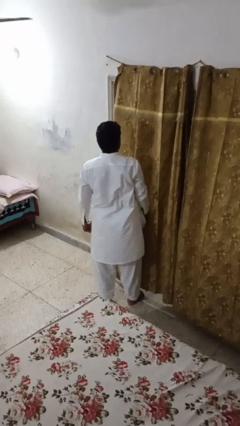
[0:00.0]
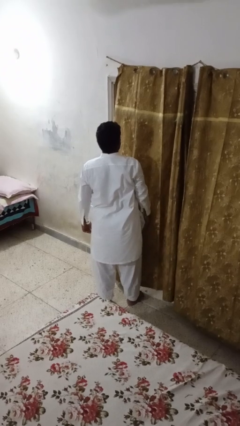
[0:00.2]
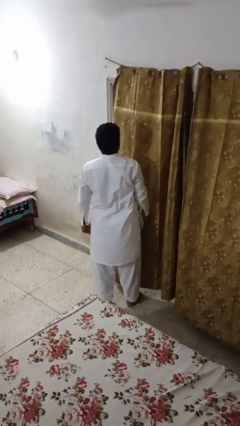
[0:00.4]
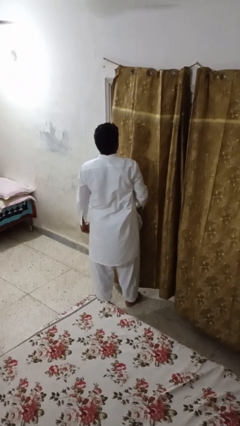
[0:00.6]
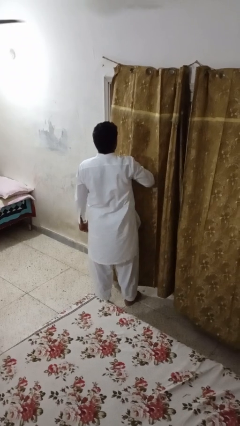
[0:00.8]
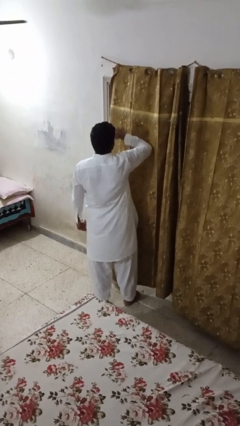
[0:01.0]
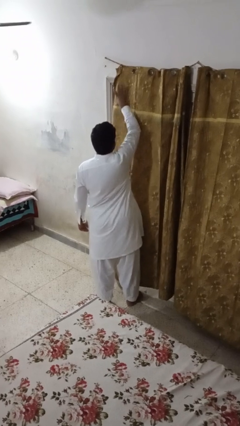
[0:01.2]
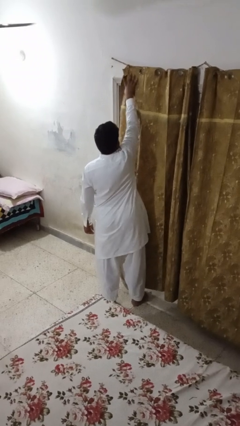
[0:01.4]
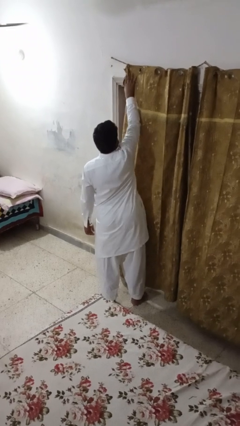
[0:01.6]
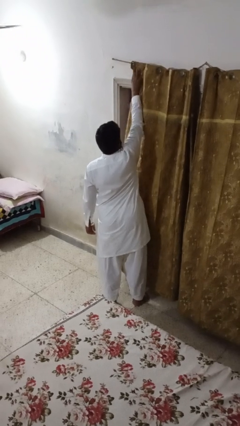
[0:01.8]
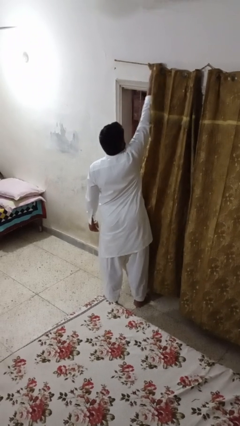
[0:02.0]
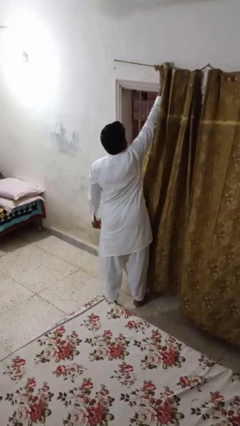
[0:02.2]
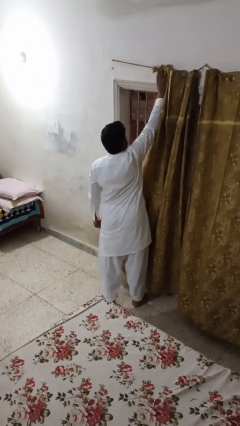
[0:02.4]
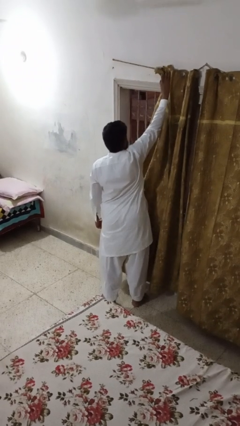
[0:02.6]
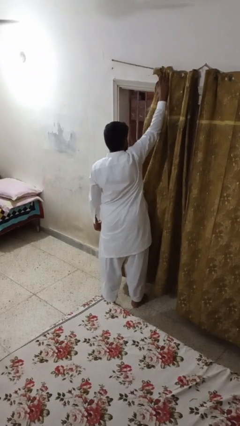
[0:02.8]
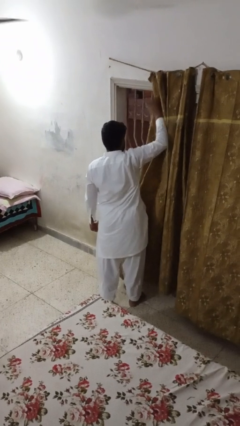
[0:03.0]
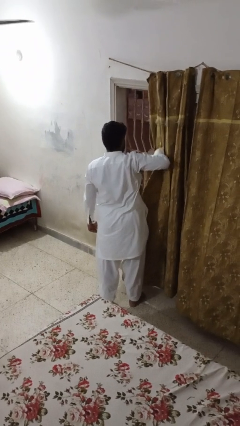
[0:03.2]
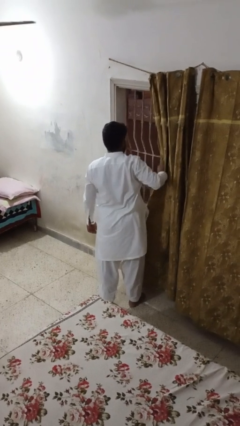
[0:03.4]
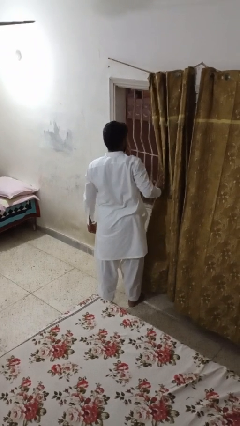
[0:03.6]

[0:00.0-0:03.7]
person opens curtains

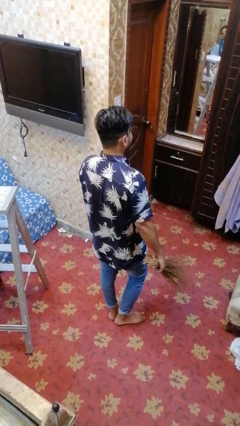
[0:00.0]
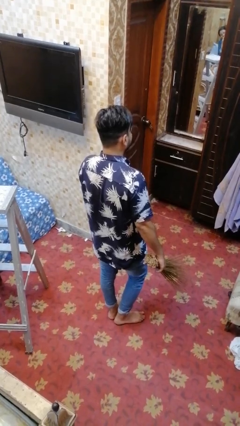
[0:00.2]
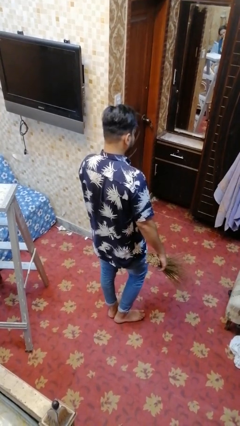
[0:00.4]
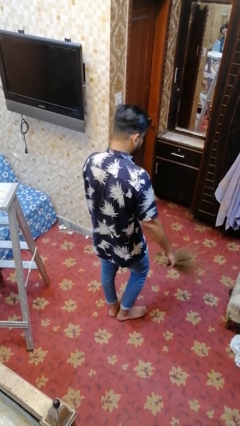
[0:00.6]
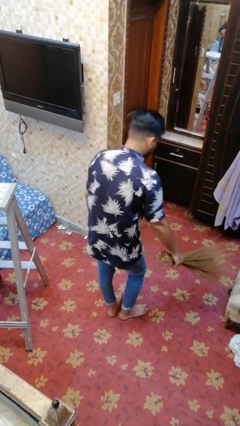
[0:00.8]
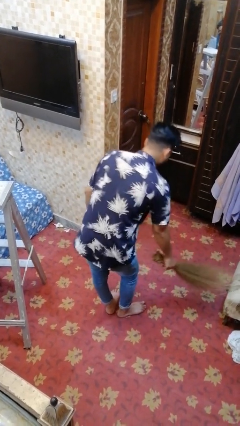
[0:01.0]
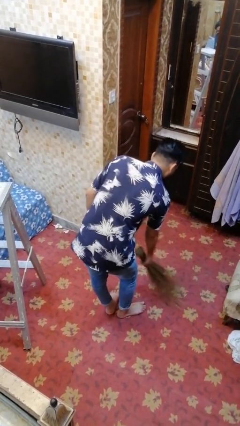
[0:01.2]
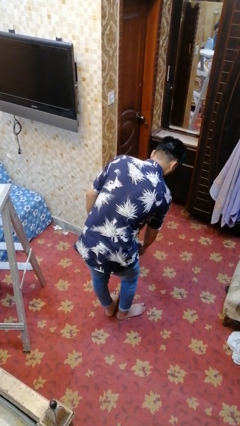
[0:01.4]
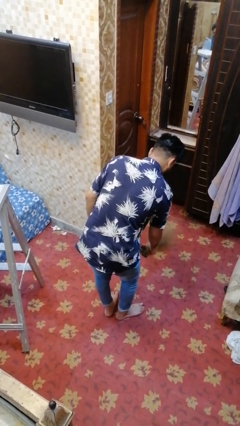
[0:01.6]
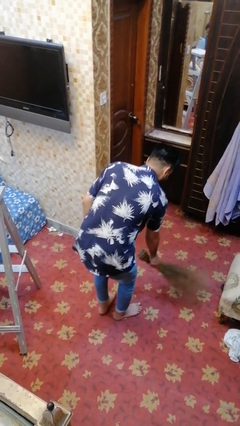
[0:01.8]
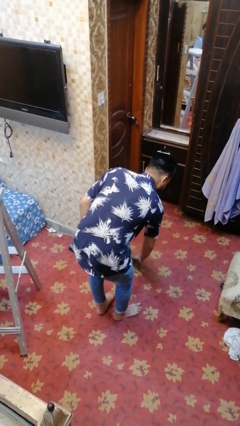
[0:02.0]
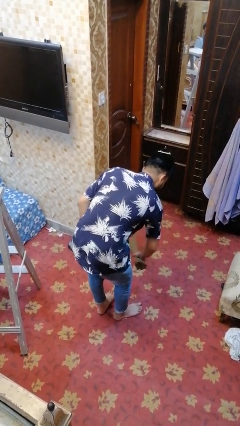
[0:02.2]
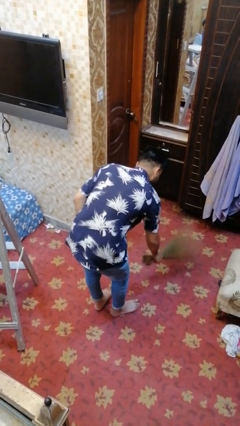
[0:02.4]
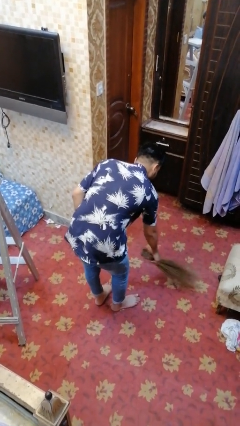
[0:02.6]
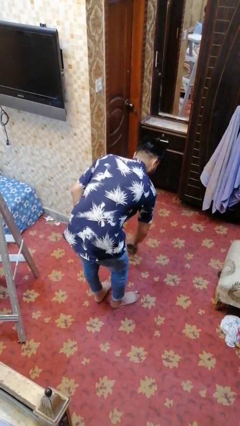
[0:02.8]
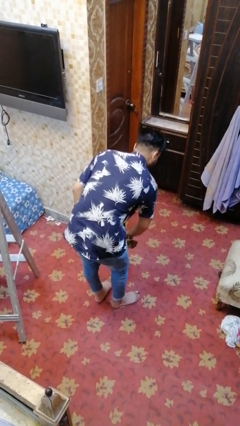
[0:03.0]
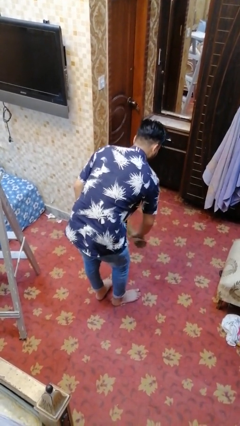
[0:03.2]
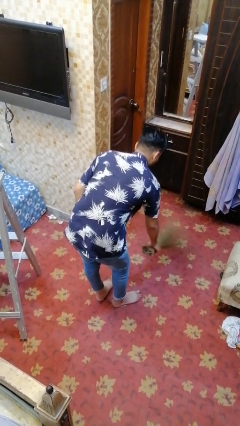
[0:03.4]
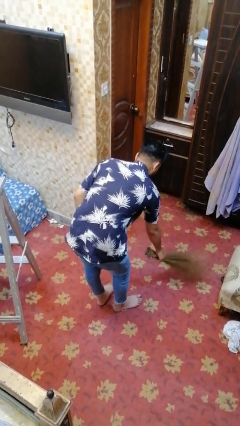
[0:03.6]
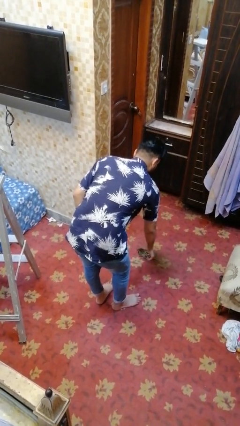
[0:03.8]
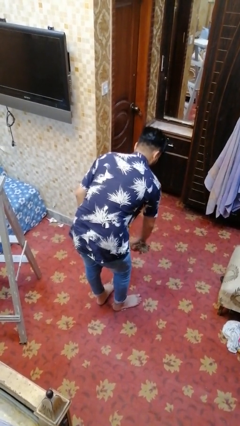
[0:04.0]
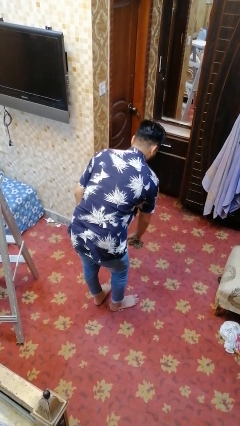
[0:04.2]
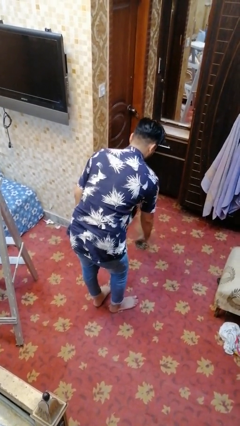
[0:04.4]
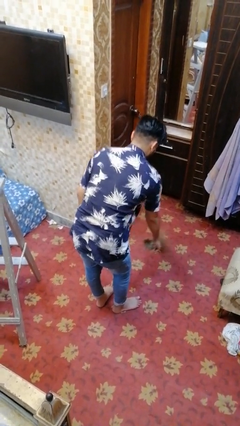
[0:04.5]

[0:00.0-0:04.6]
person sweeps floor

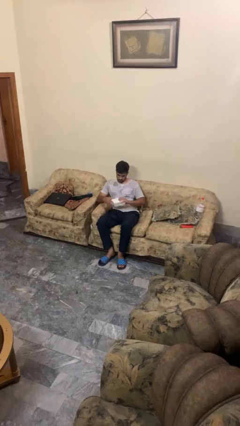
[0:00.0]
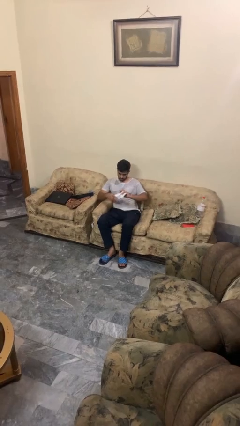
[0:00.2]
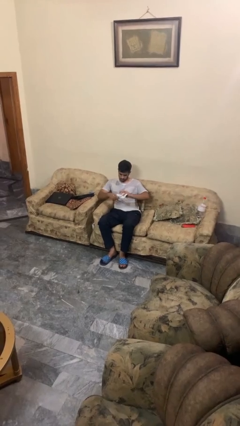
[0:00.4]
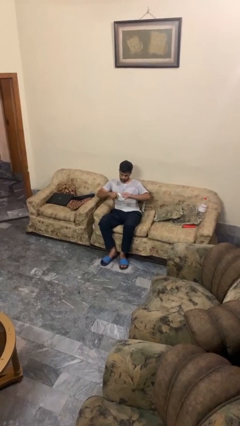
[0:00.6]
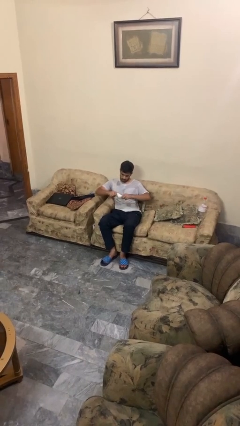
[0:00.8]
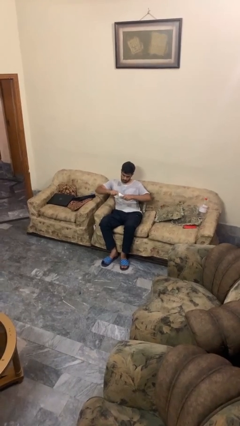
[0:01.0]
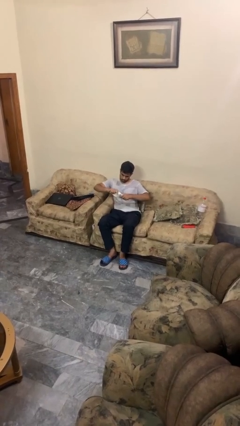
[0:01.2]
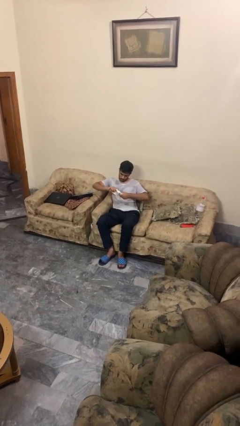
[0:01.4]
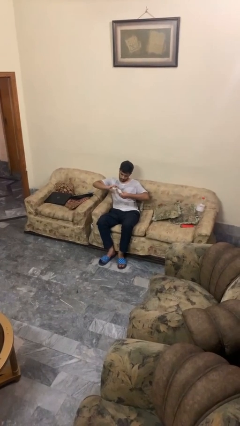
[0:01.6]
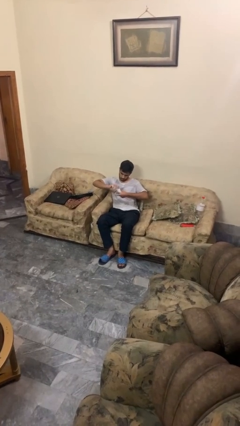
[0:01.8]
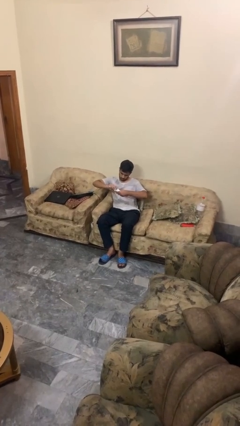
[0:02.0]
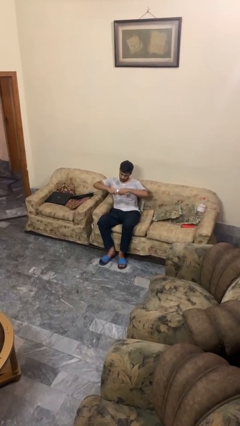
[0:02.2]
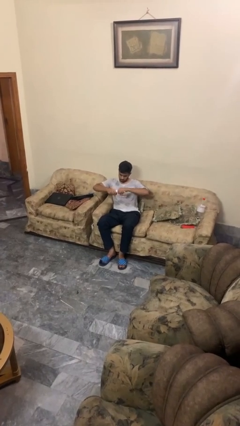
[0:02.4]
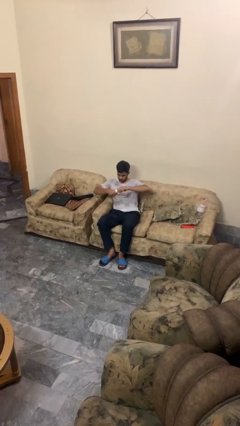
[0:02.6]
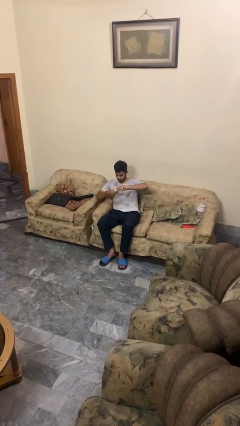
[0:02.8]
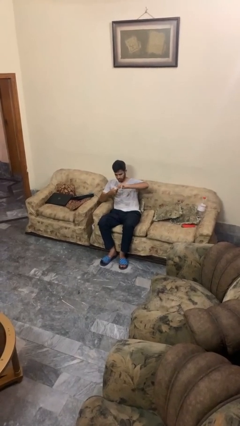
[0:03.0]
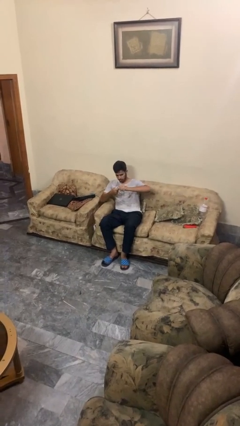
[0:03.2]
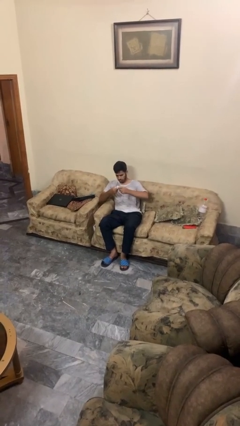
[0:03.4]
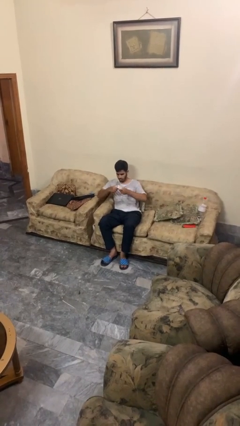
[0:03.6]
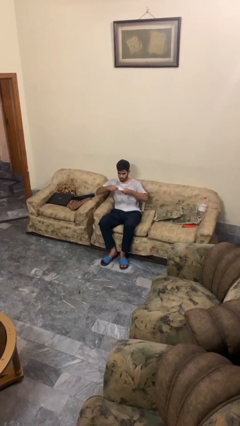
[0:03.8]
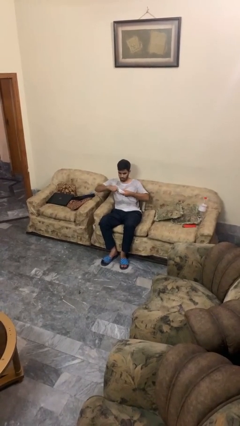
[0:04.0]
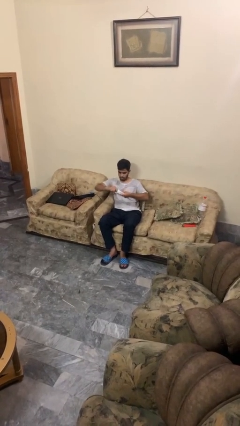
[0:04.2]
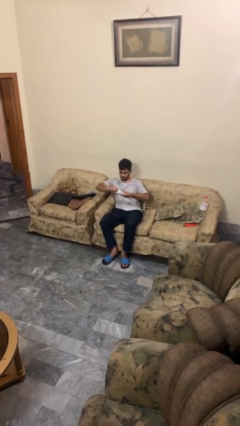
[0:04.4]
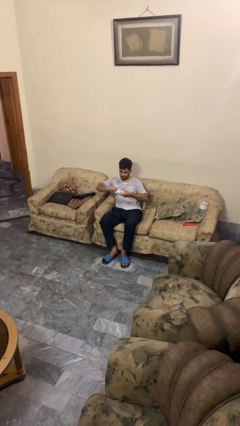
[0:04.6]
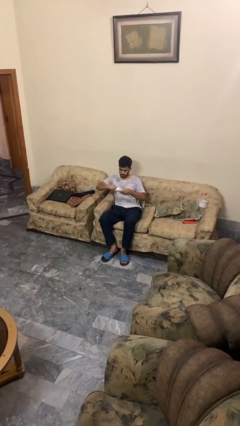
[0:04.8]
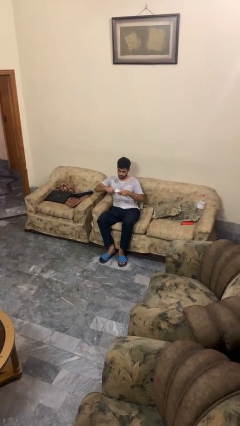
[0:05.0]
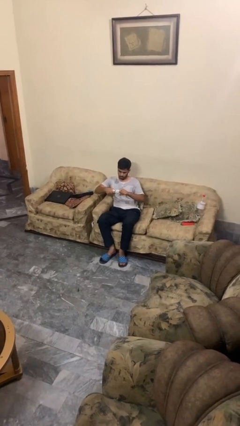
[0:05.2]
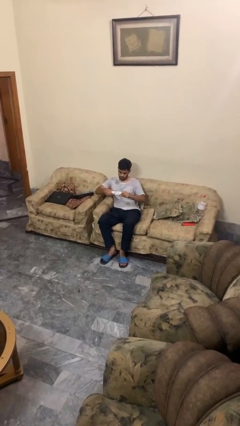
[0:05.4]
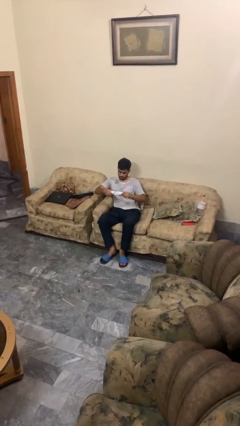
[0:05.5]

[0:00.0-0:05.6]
person squeezes object

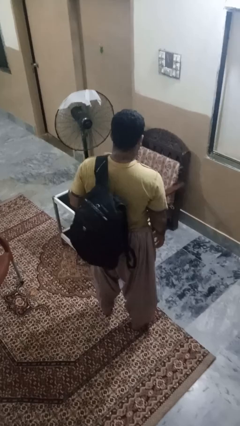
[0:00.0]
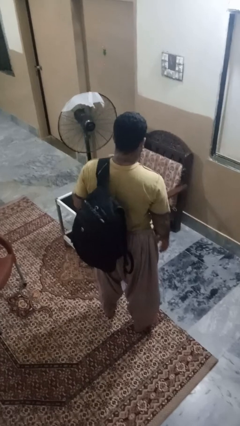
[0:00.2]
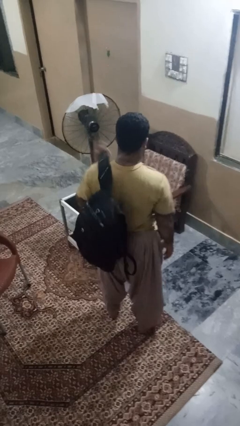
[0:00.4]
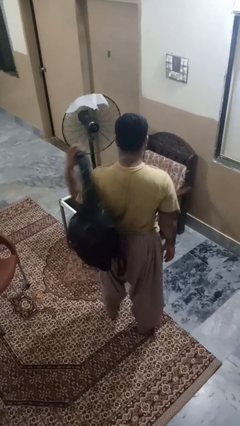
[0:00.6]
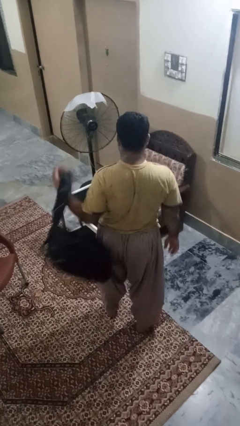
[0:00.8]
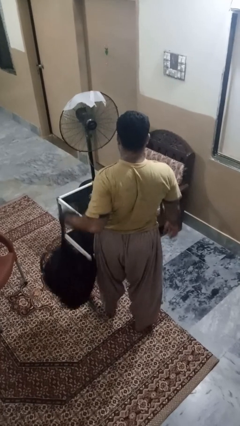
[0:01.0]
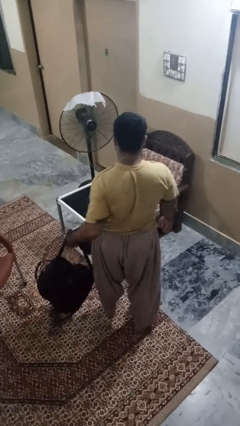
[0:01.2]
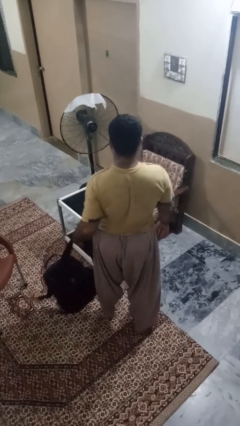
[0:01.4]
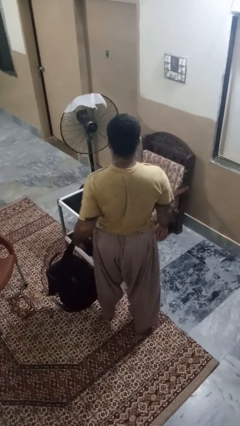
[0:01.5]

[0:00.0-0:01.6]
person takes off backpack

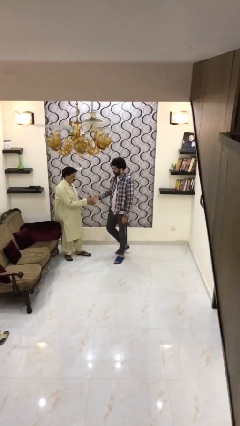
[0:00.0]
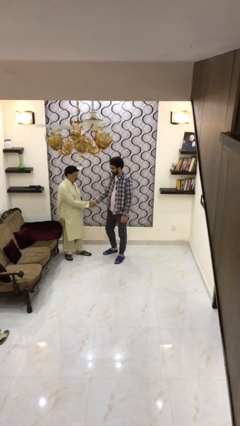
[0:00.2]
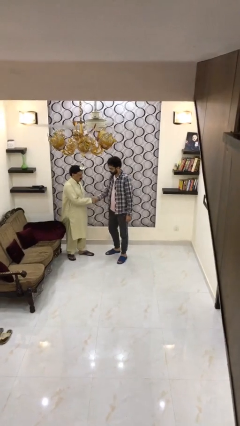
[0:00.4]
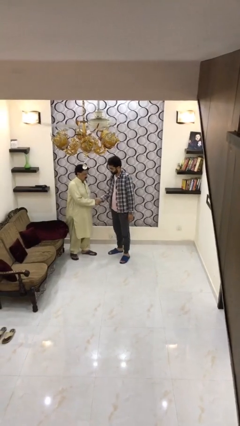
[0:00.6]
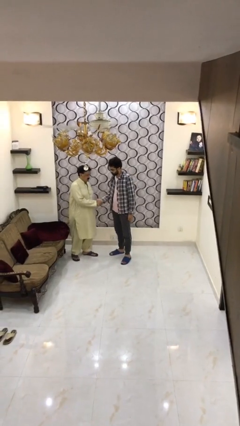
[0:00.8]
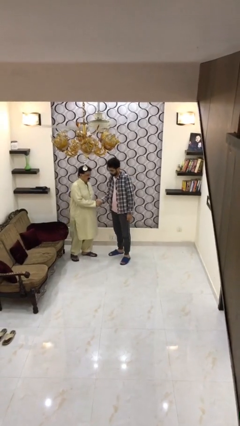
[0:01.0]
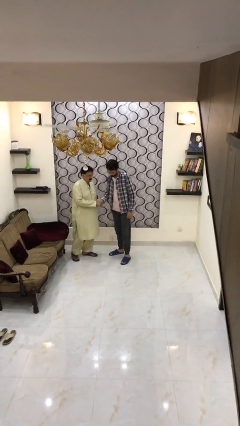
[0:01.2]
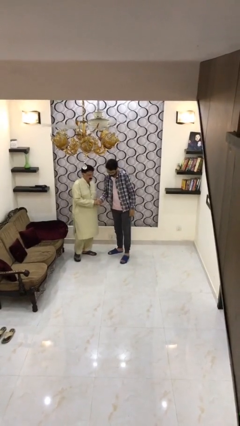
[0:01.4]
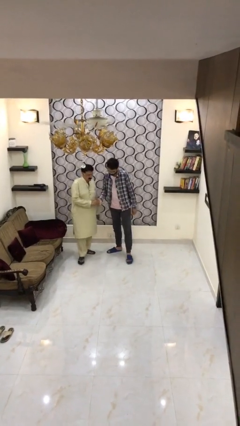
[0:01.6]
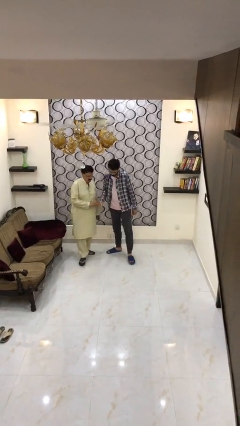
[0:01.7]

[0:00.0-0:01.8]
person shakes hand

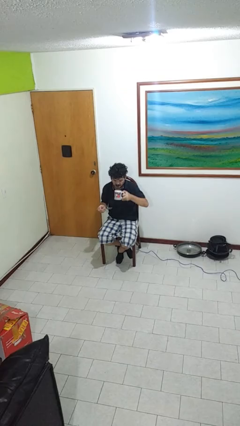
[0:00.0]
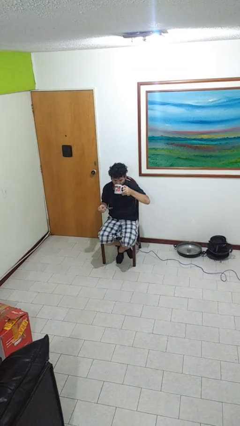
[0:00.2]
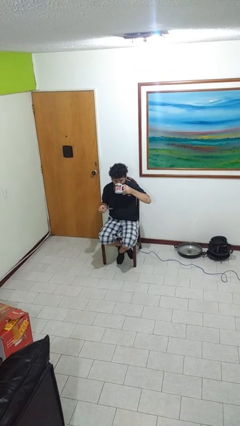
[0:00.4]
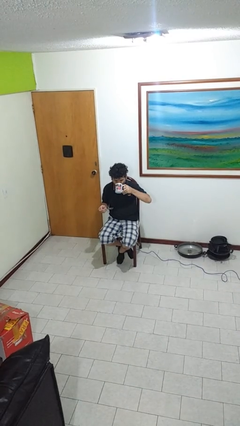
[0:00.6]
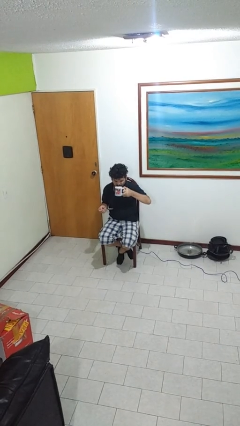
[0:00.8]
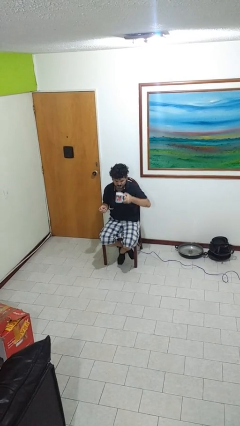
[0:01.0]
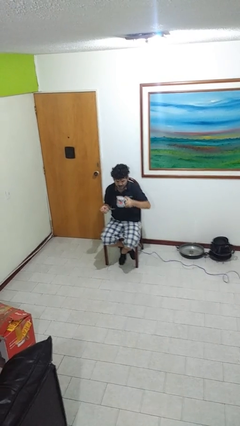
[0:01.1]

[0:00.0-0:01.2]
person drinks from mug
